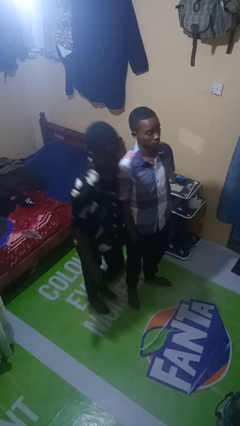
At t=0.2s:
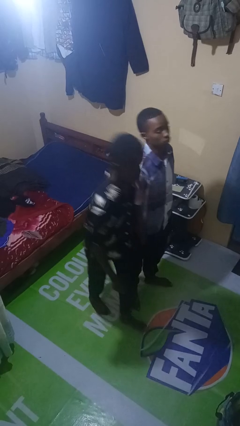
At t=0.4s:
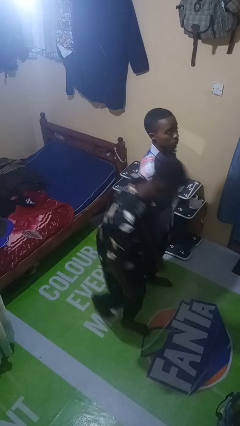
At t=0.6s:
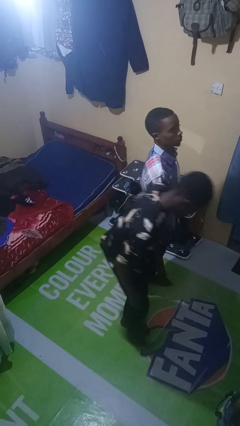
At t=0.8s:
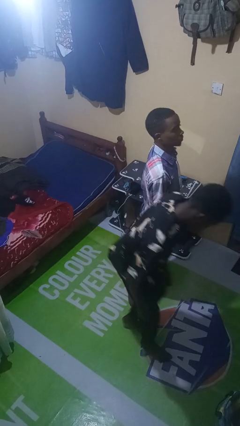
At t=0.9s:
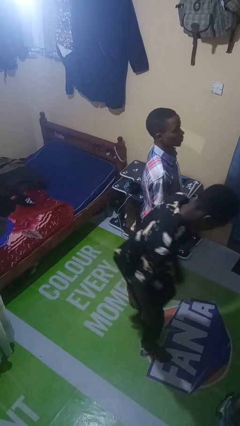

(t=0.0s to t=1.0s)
person bumps into person

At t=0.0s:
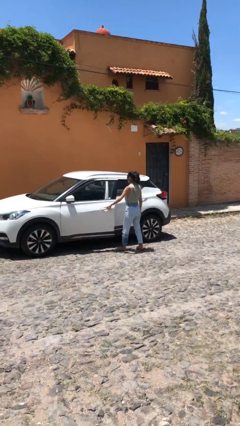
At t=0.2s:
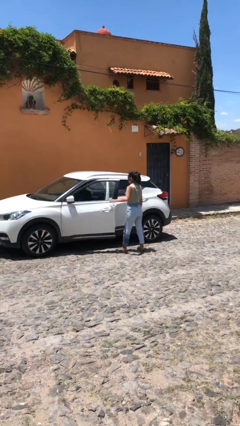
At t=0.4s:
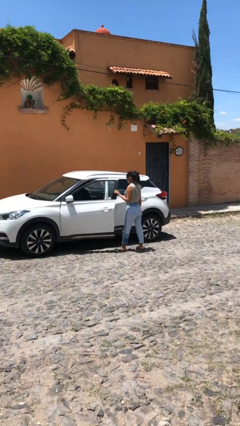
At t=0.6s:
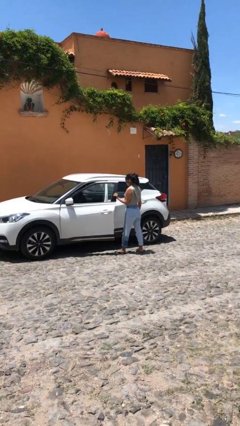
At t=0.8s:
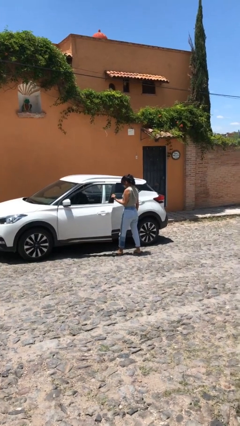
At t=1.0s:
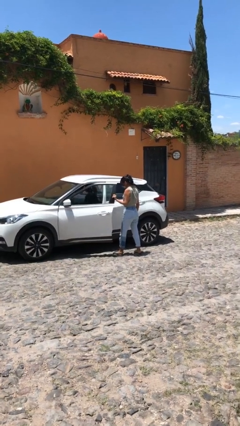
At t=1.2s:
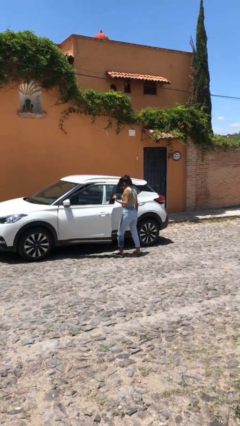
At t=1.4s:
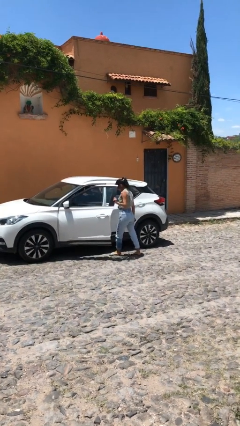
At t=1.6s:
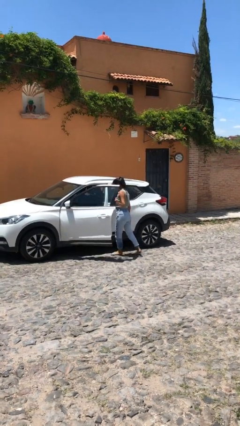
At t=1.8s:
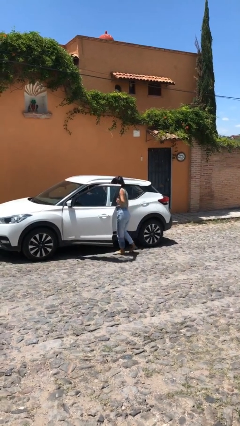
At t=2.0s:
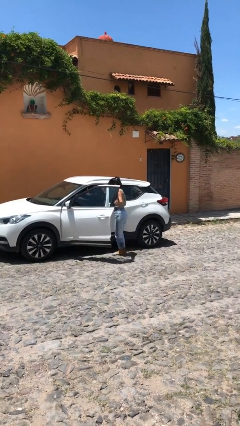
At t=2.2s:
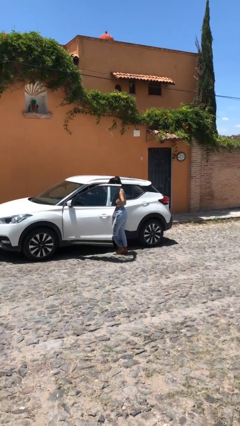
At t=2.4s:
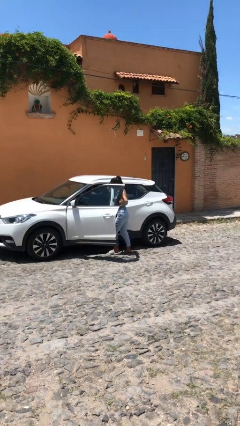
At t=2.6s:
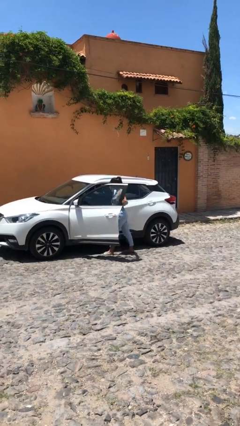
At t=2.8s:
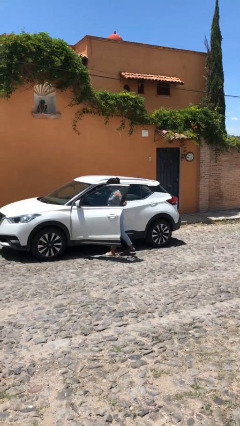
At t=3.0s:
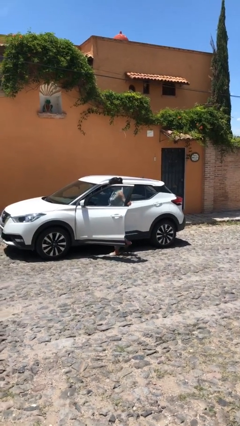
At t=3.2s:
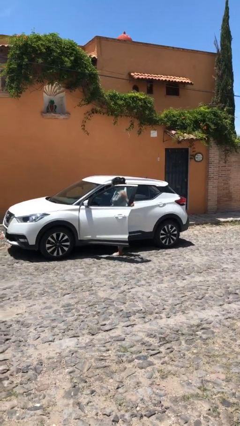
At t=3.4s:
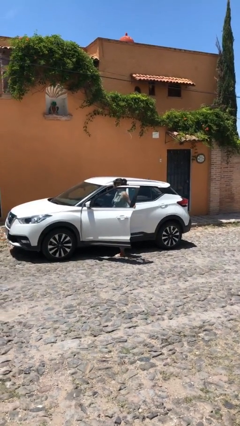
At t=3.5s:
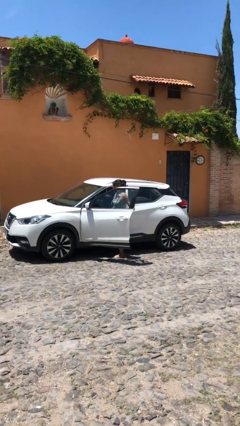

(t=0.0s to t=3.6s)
person opens car door

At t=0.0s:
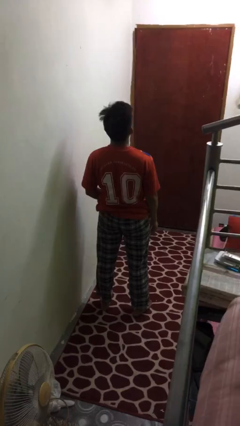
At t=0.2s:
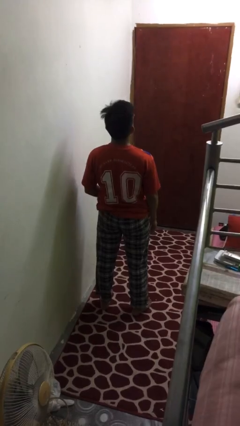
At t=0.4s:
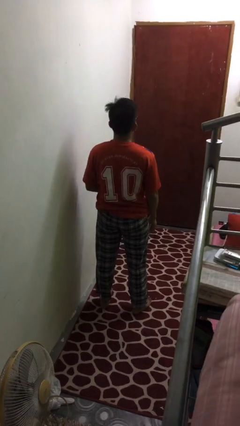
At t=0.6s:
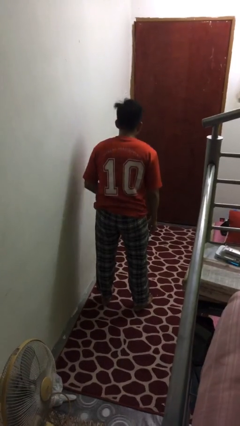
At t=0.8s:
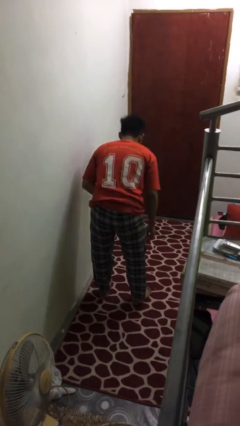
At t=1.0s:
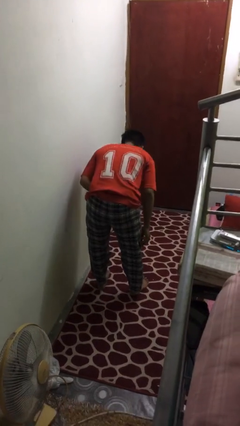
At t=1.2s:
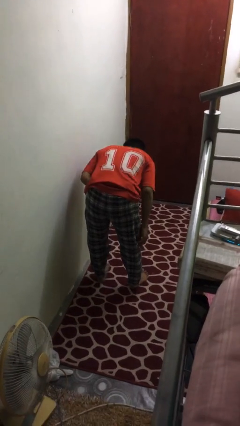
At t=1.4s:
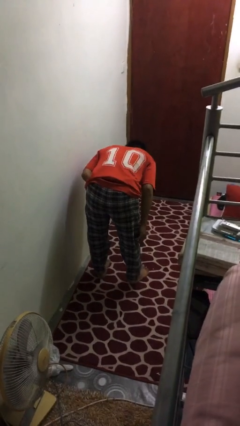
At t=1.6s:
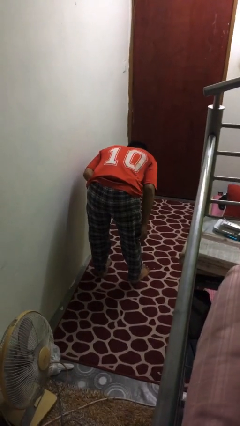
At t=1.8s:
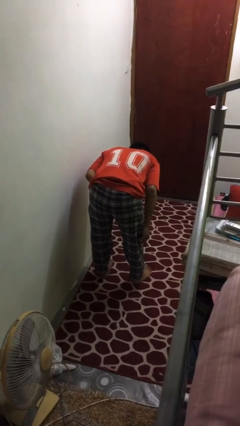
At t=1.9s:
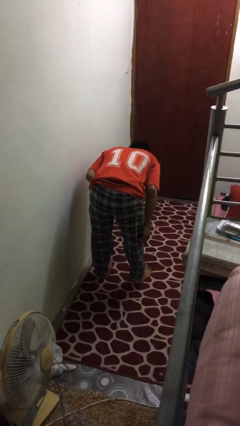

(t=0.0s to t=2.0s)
person bows

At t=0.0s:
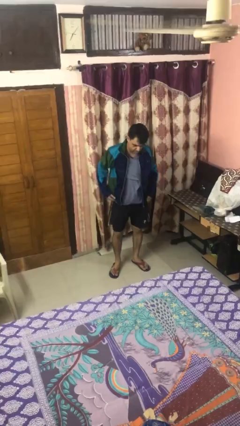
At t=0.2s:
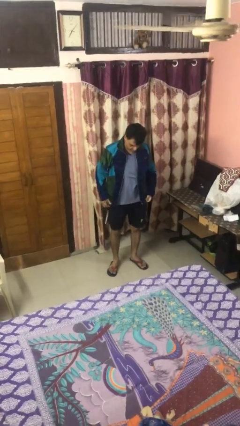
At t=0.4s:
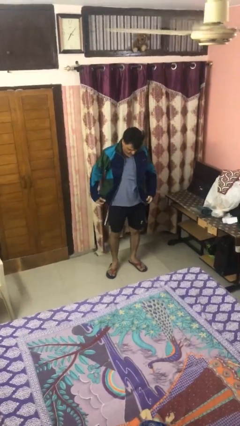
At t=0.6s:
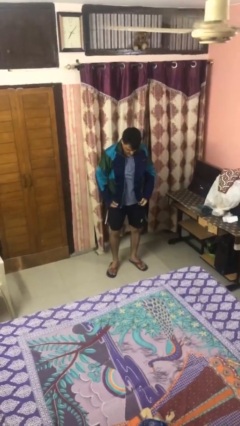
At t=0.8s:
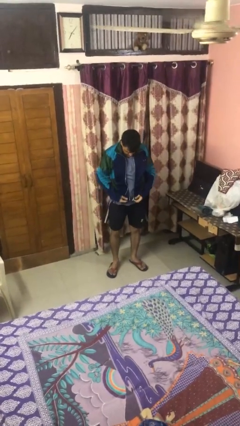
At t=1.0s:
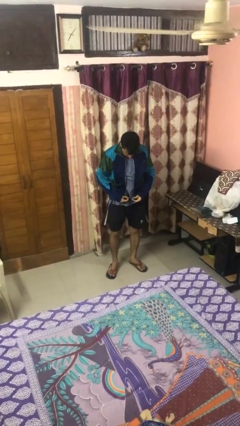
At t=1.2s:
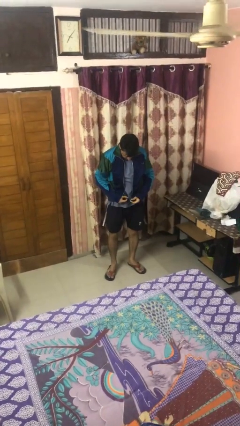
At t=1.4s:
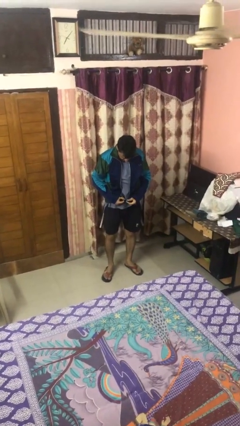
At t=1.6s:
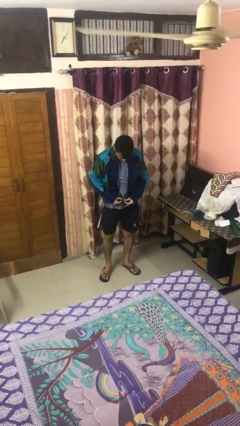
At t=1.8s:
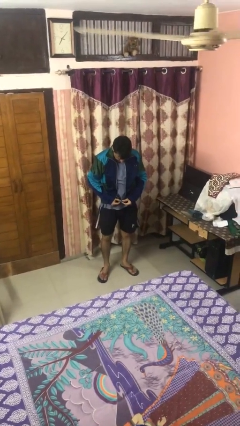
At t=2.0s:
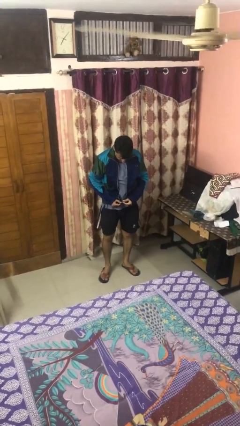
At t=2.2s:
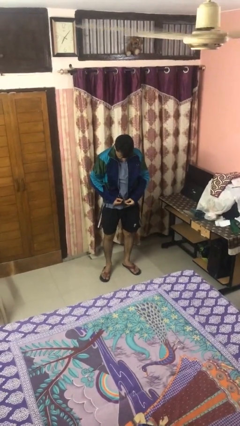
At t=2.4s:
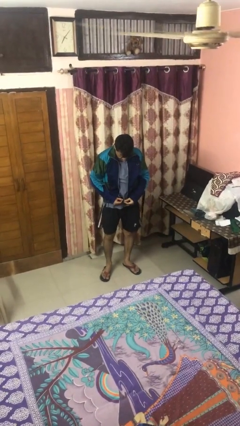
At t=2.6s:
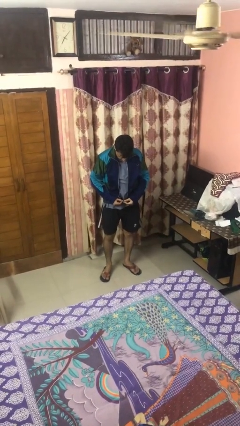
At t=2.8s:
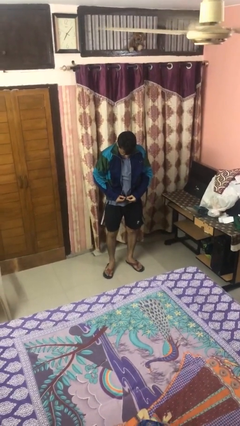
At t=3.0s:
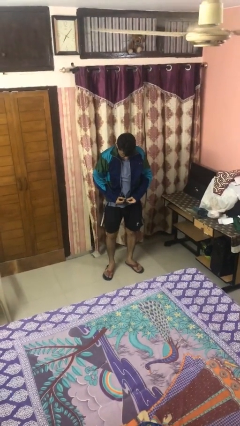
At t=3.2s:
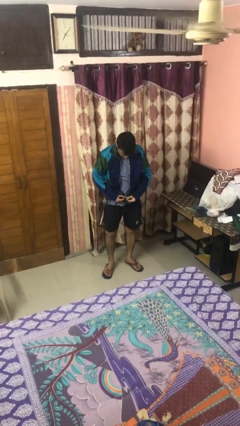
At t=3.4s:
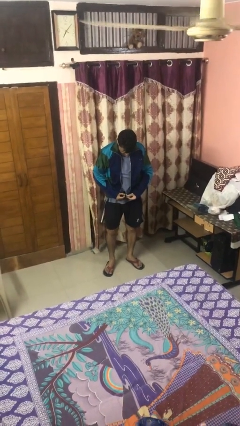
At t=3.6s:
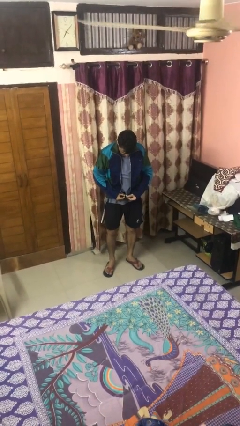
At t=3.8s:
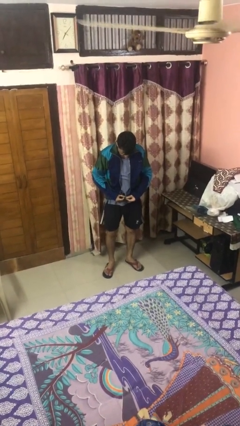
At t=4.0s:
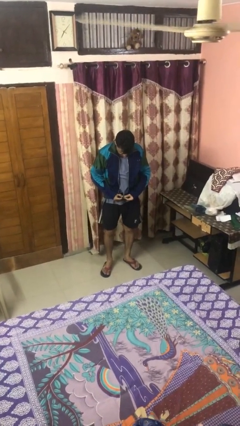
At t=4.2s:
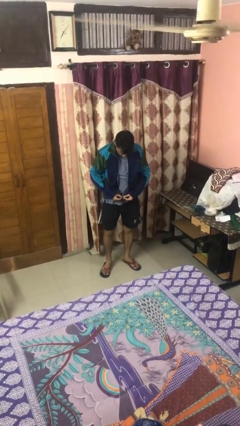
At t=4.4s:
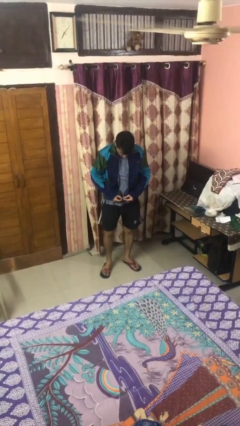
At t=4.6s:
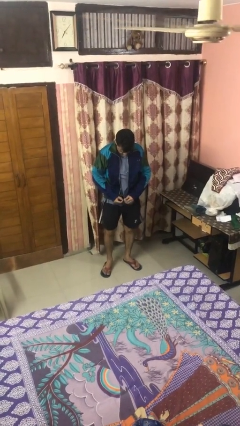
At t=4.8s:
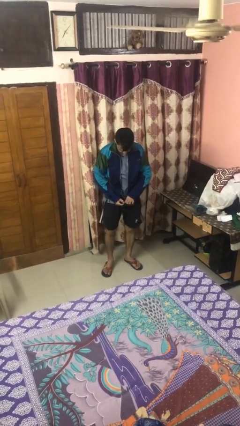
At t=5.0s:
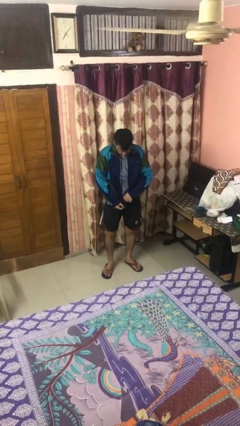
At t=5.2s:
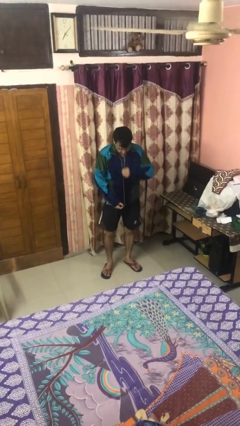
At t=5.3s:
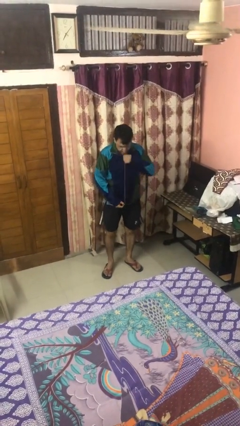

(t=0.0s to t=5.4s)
person zips up jacket

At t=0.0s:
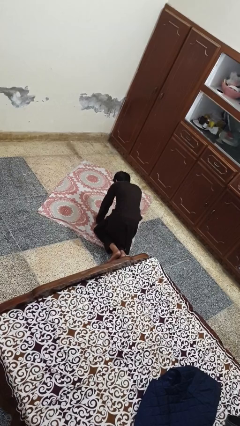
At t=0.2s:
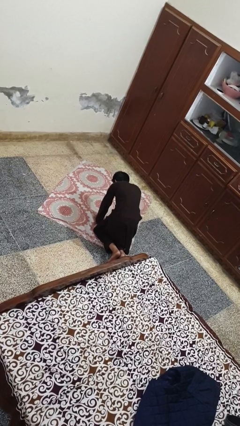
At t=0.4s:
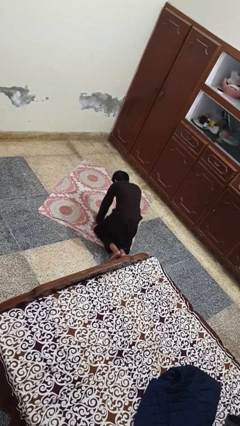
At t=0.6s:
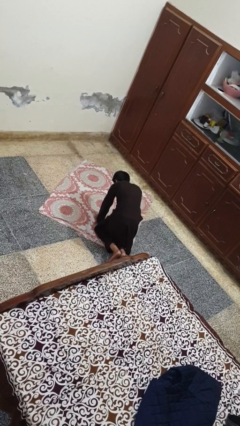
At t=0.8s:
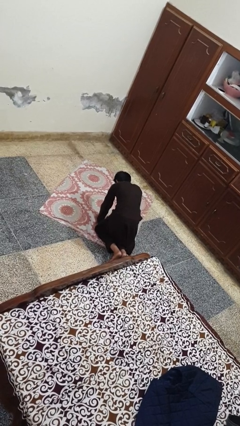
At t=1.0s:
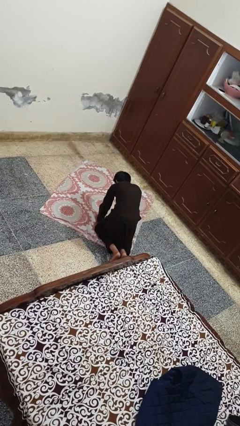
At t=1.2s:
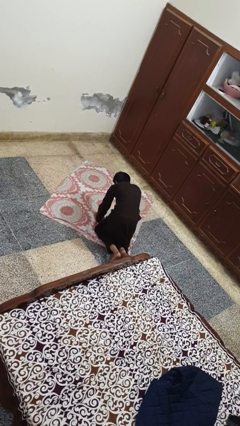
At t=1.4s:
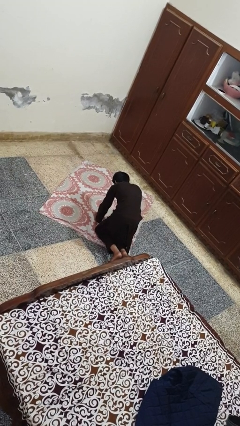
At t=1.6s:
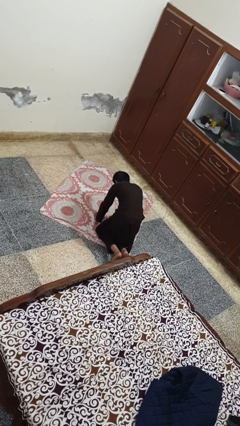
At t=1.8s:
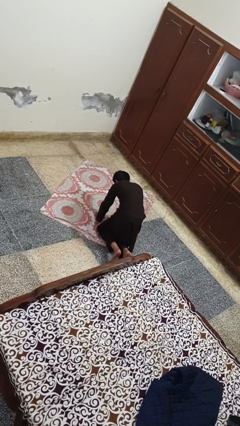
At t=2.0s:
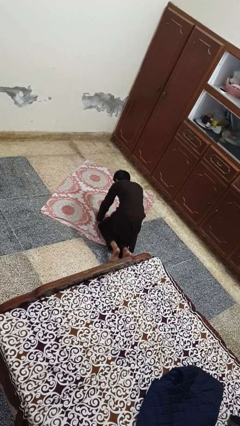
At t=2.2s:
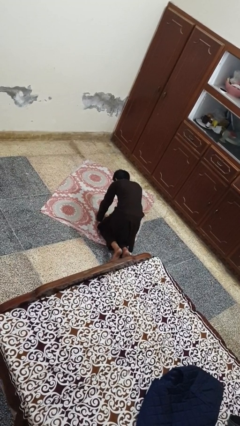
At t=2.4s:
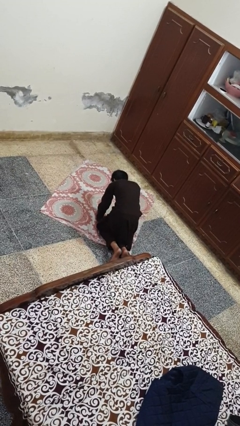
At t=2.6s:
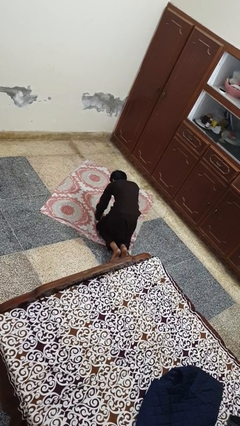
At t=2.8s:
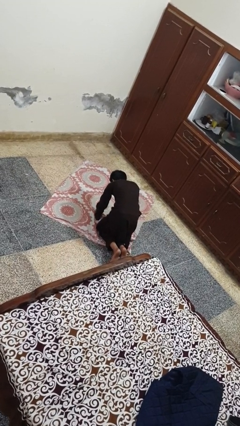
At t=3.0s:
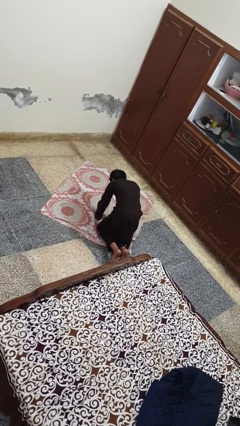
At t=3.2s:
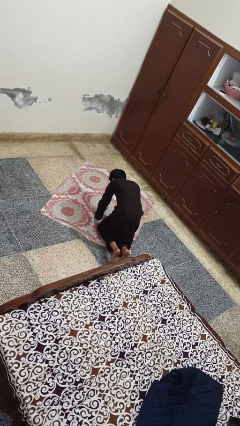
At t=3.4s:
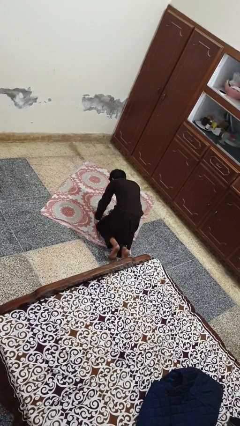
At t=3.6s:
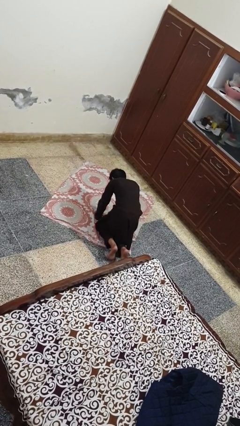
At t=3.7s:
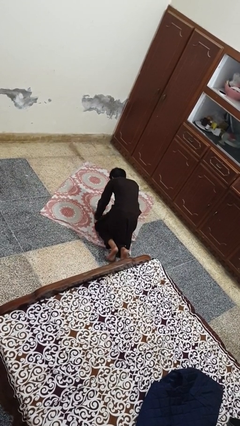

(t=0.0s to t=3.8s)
person crawls

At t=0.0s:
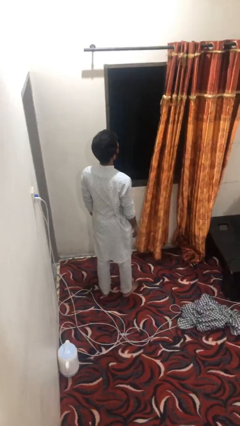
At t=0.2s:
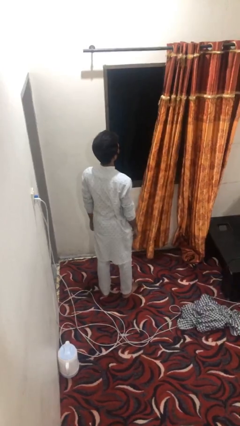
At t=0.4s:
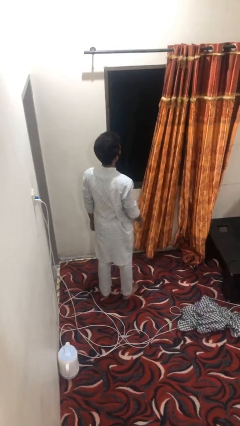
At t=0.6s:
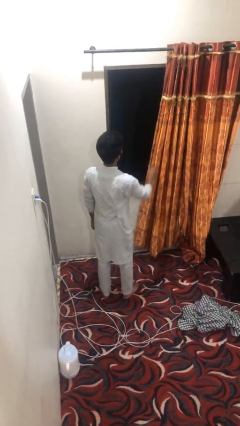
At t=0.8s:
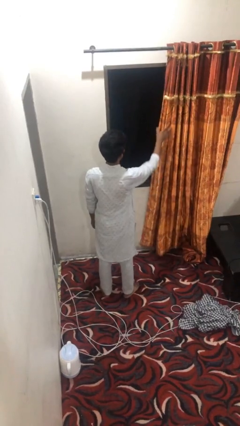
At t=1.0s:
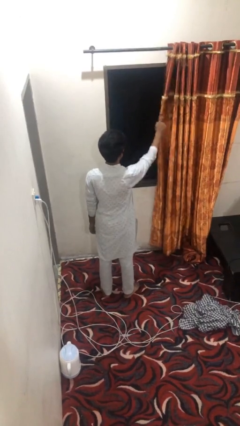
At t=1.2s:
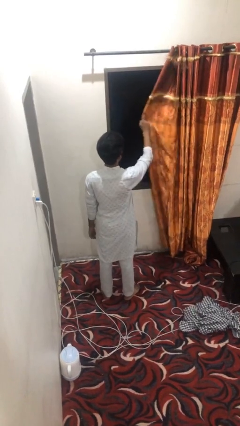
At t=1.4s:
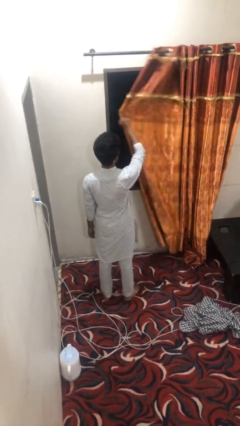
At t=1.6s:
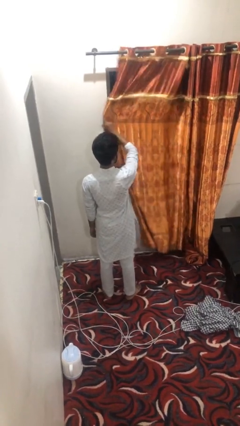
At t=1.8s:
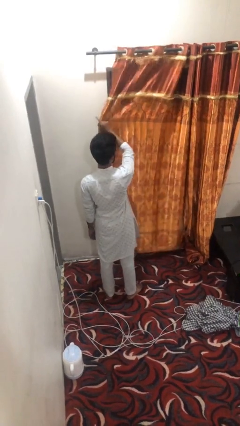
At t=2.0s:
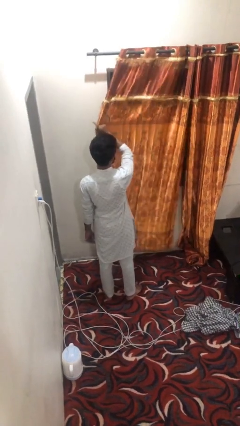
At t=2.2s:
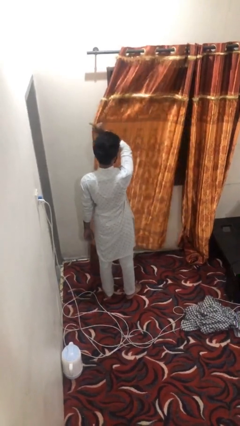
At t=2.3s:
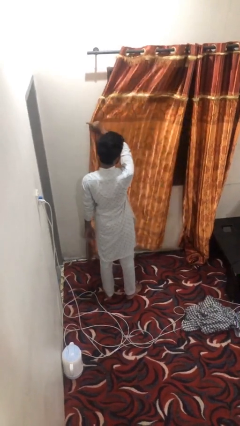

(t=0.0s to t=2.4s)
person closes curtains
